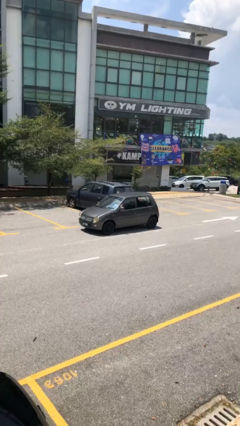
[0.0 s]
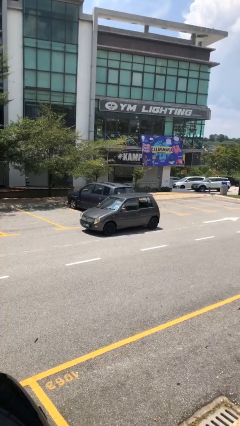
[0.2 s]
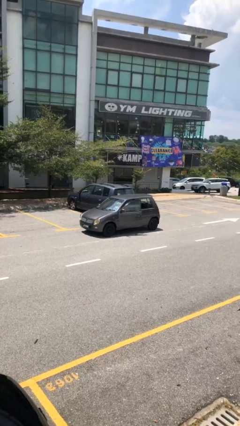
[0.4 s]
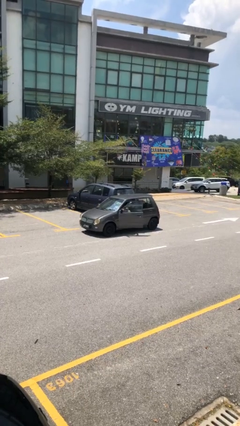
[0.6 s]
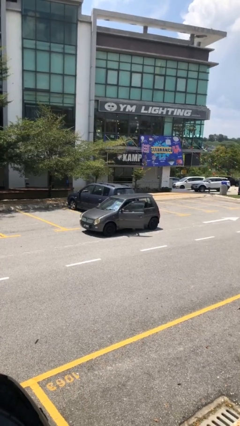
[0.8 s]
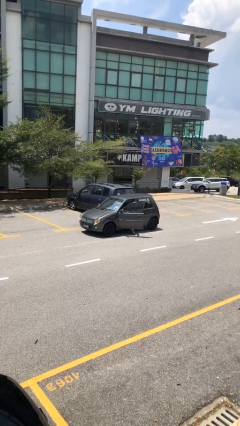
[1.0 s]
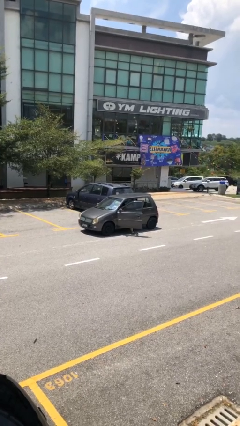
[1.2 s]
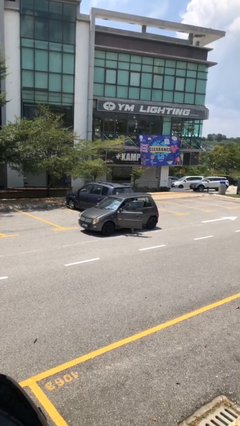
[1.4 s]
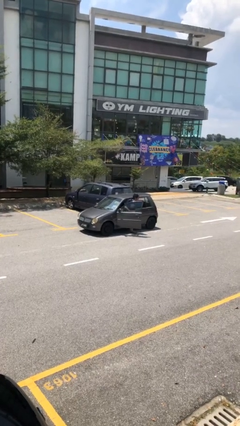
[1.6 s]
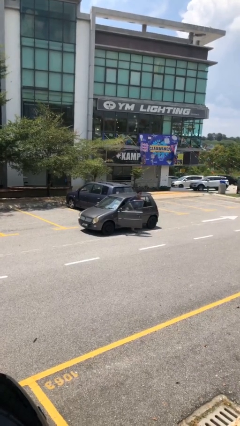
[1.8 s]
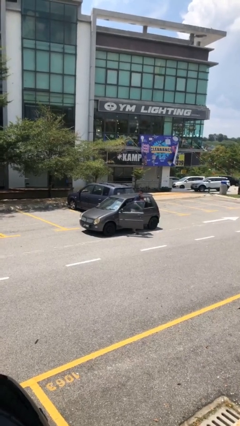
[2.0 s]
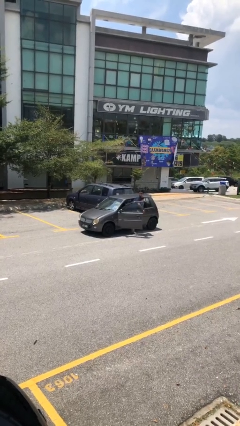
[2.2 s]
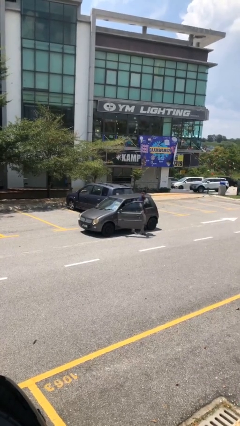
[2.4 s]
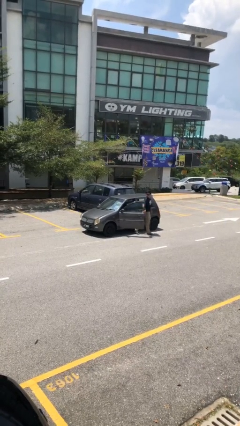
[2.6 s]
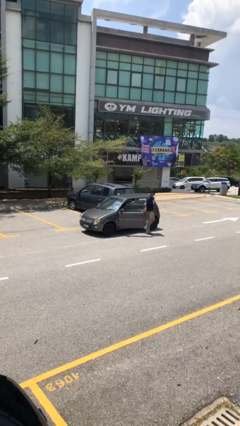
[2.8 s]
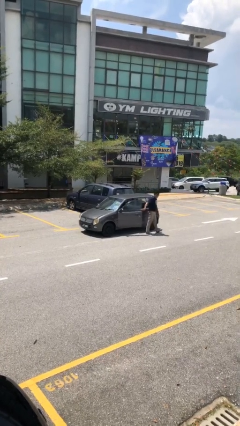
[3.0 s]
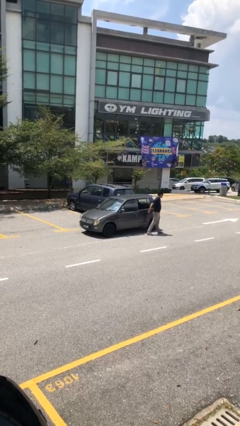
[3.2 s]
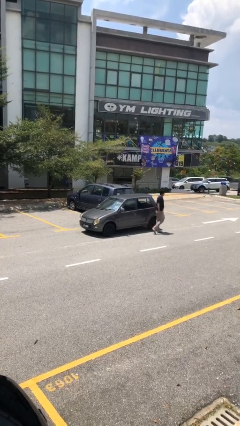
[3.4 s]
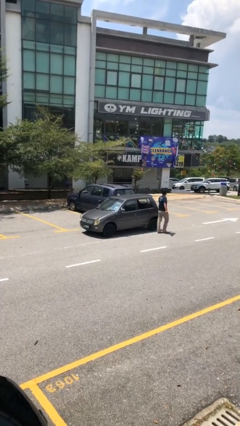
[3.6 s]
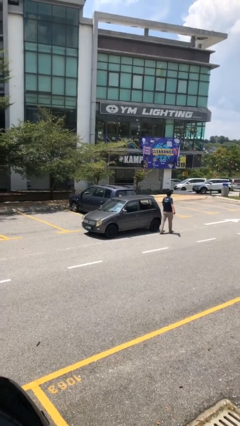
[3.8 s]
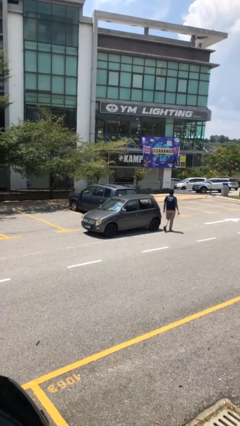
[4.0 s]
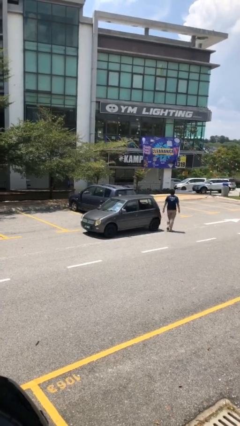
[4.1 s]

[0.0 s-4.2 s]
car drops off person

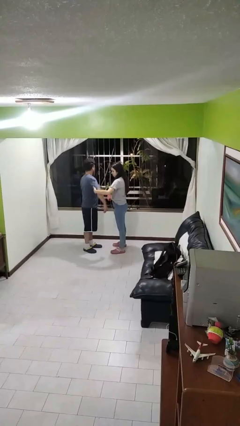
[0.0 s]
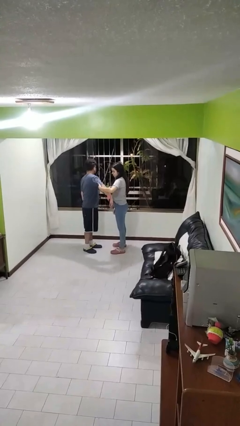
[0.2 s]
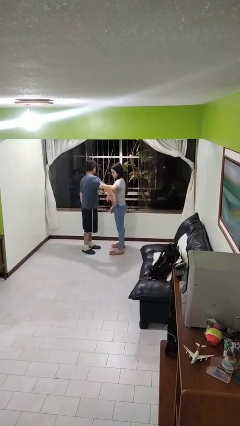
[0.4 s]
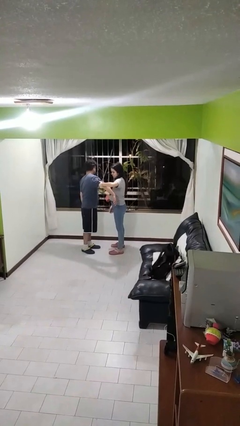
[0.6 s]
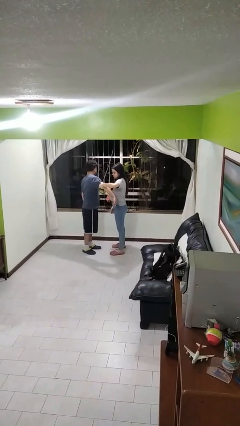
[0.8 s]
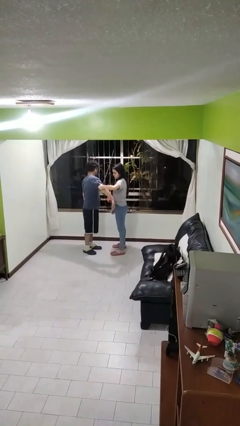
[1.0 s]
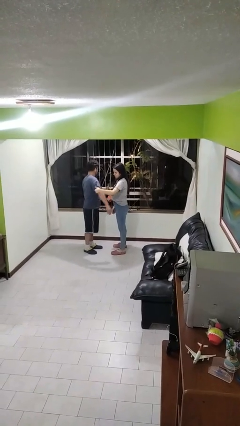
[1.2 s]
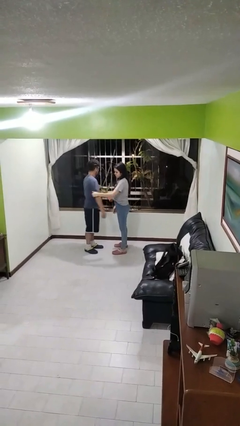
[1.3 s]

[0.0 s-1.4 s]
person grabs person by bicep

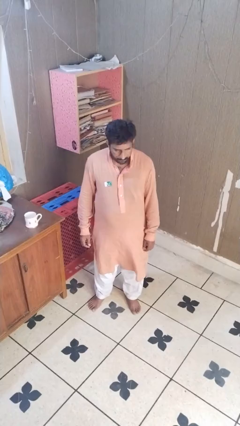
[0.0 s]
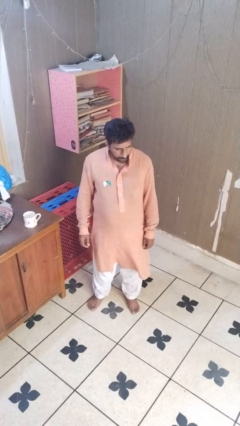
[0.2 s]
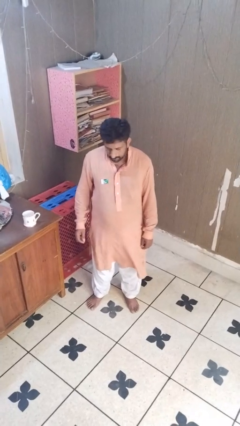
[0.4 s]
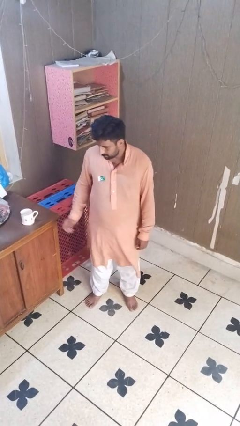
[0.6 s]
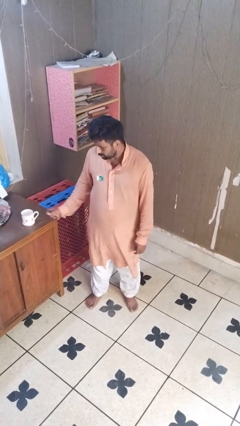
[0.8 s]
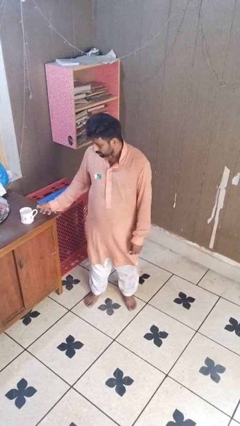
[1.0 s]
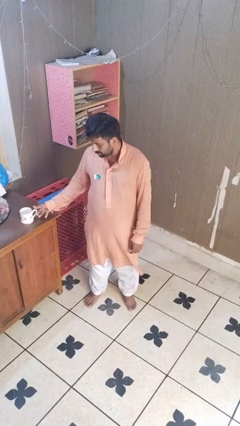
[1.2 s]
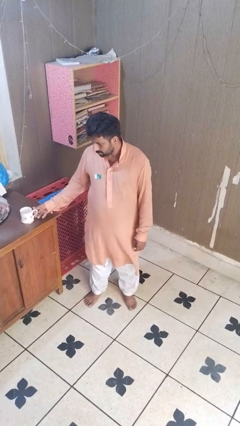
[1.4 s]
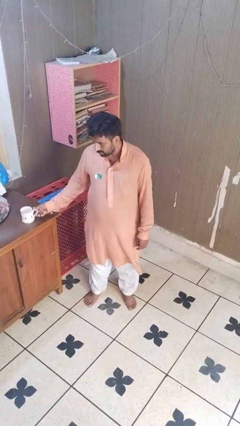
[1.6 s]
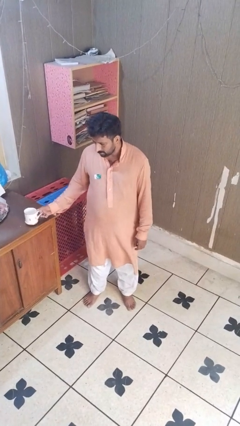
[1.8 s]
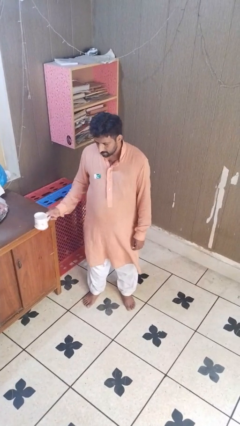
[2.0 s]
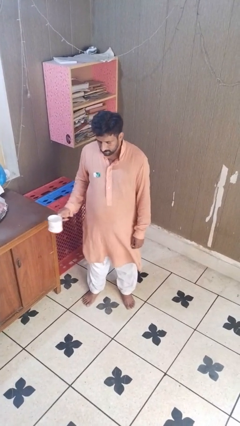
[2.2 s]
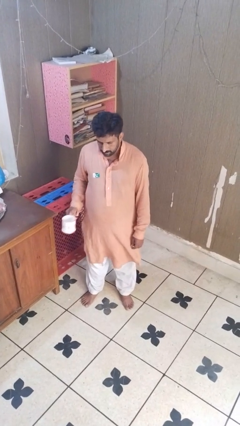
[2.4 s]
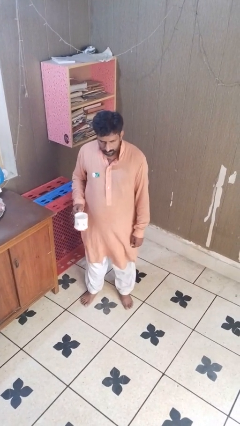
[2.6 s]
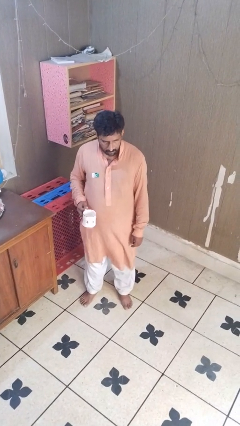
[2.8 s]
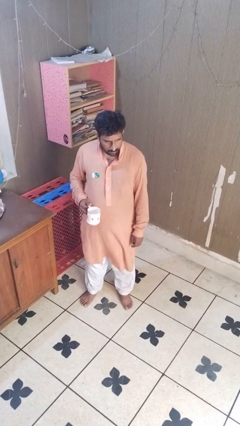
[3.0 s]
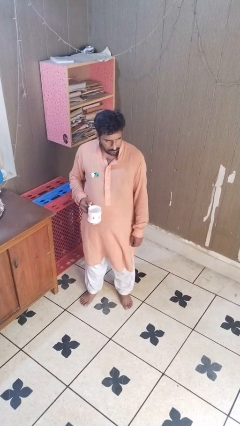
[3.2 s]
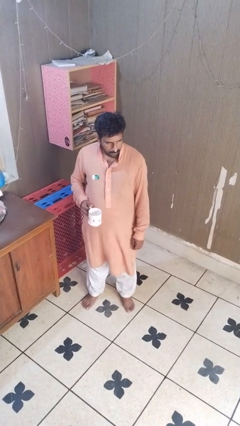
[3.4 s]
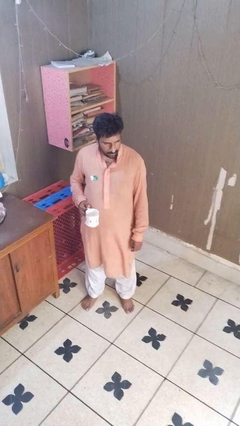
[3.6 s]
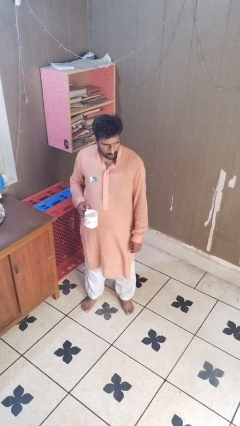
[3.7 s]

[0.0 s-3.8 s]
person picks up object from table

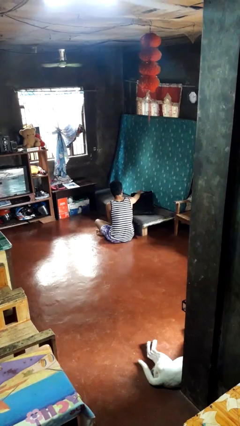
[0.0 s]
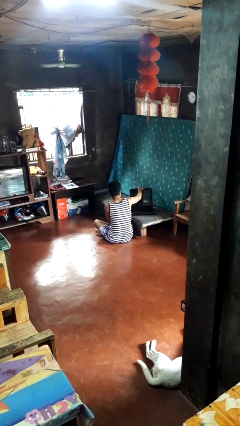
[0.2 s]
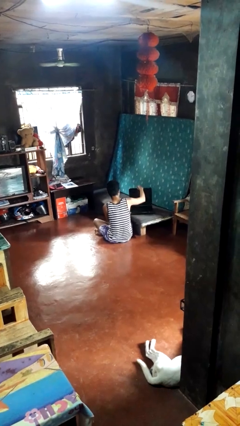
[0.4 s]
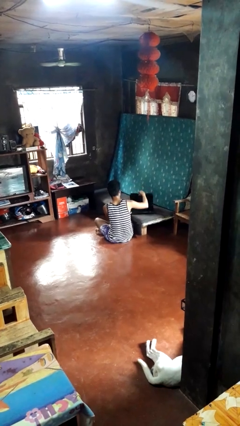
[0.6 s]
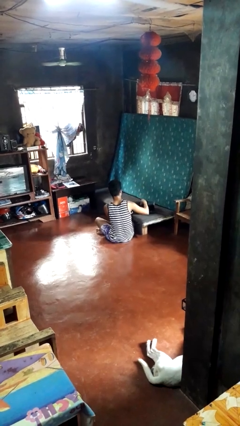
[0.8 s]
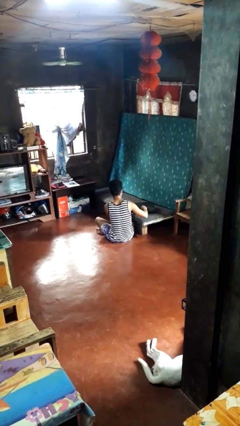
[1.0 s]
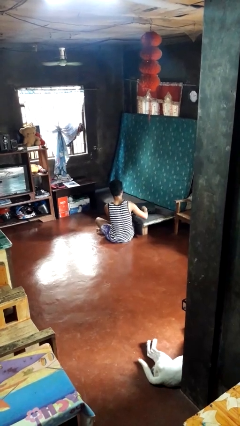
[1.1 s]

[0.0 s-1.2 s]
person closes suitcase

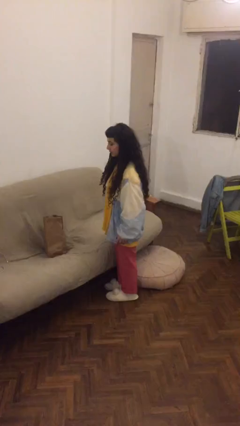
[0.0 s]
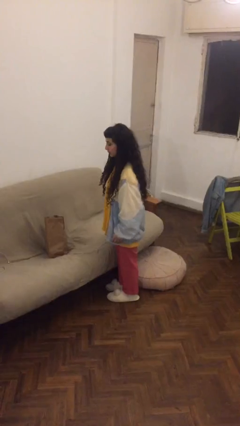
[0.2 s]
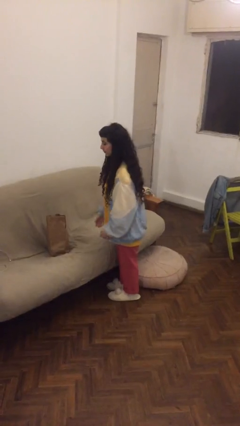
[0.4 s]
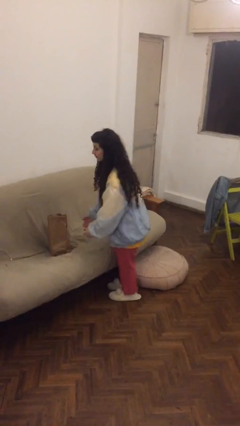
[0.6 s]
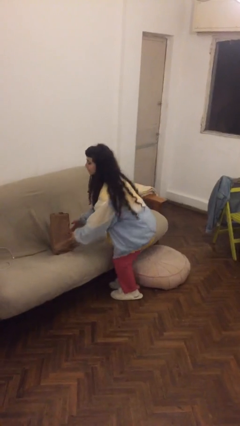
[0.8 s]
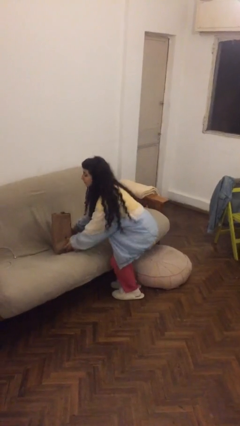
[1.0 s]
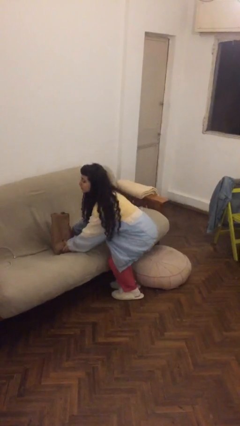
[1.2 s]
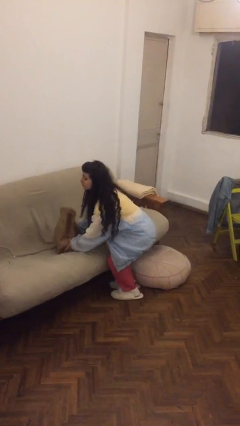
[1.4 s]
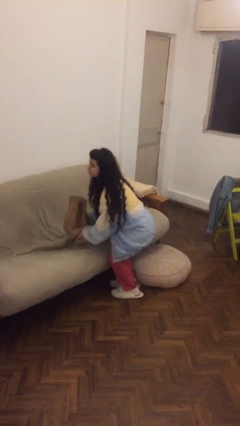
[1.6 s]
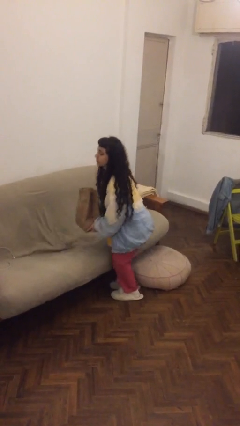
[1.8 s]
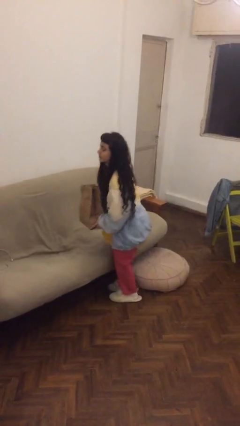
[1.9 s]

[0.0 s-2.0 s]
person picks up object from couch

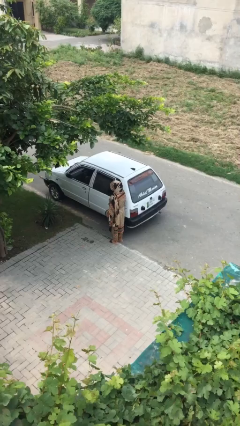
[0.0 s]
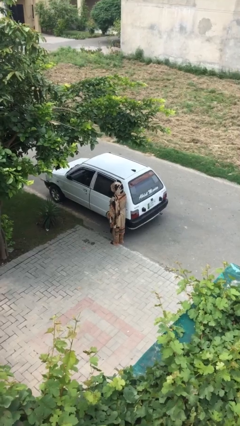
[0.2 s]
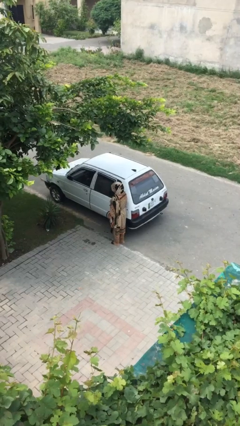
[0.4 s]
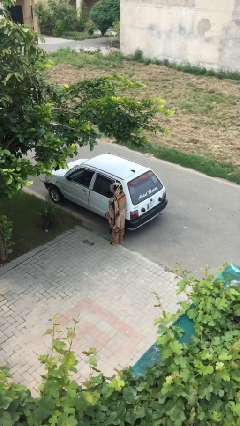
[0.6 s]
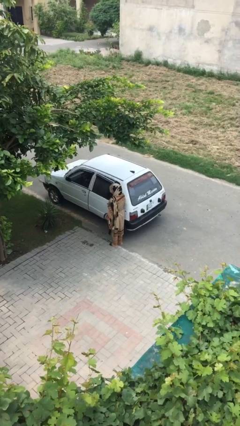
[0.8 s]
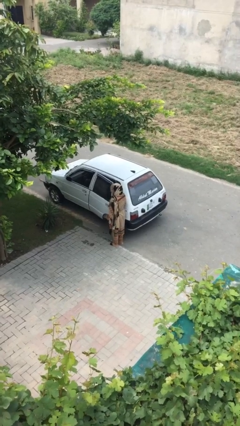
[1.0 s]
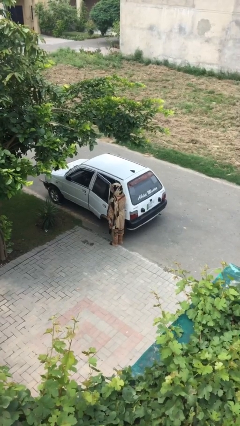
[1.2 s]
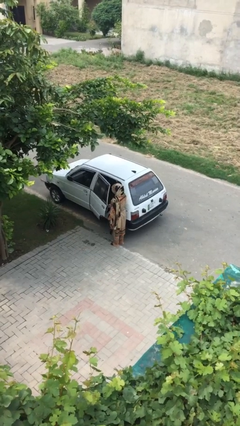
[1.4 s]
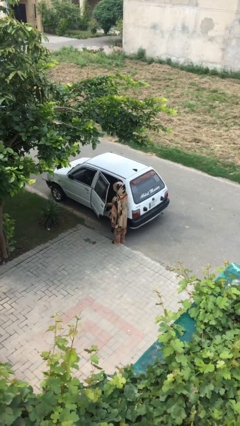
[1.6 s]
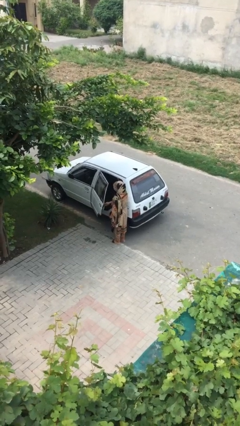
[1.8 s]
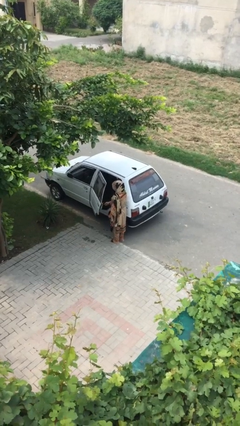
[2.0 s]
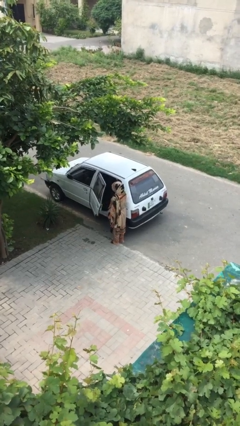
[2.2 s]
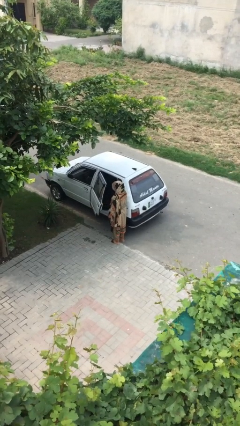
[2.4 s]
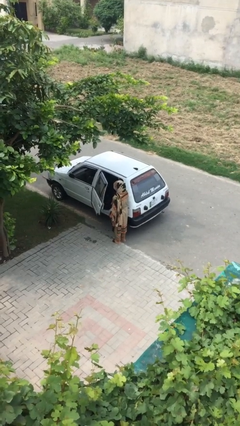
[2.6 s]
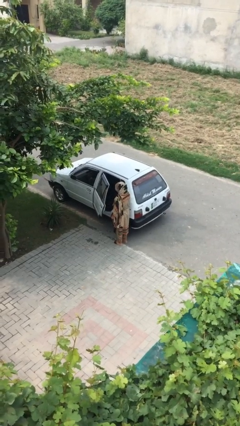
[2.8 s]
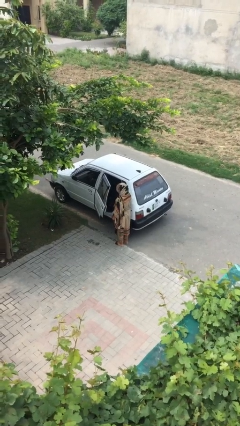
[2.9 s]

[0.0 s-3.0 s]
person opens car door

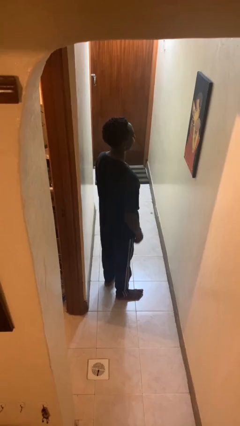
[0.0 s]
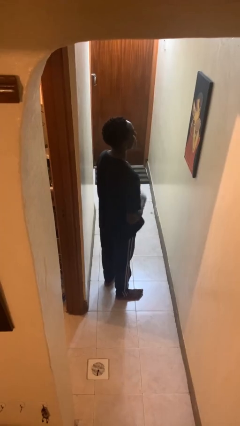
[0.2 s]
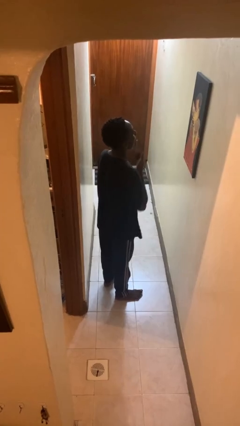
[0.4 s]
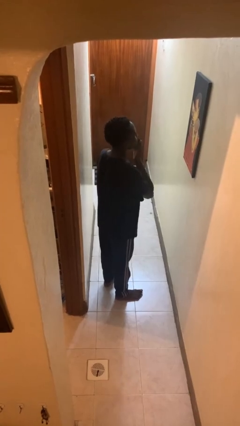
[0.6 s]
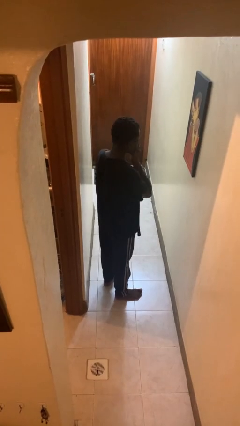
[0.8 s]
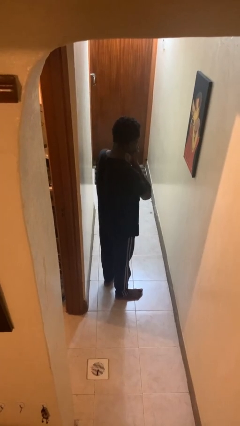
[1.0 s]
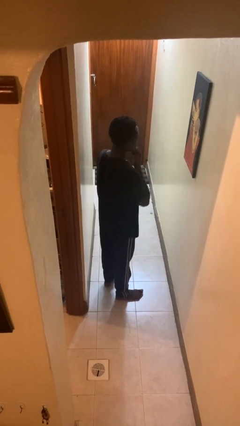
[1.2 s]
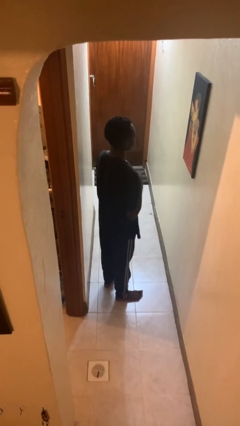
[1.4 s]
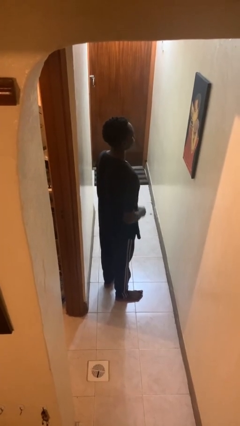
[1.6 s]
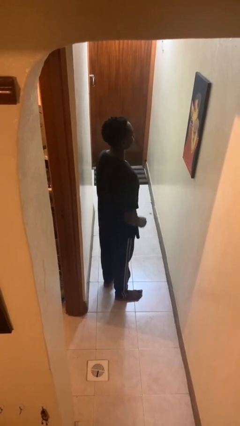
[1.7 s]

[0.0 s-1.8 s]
person sneezes into hand
